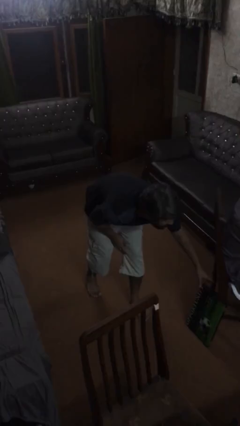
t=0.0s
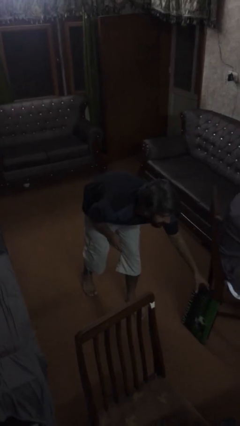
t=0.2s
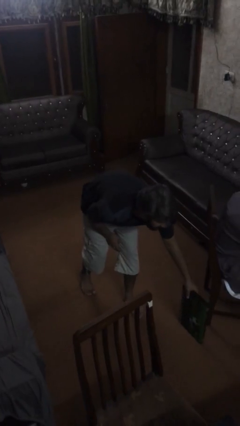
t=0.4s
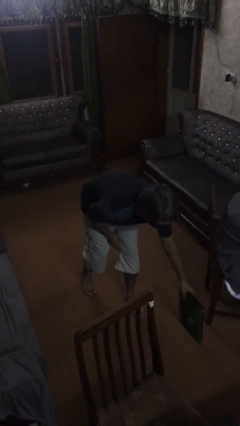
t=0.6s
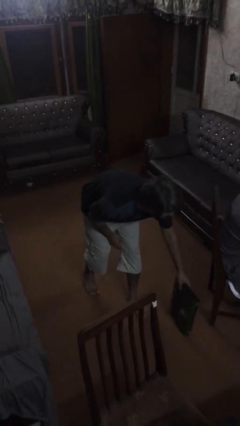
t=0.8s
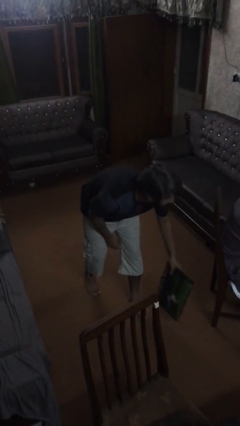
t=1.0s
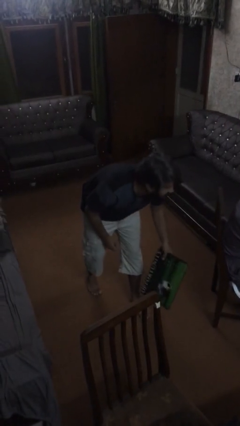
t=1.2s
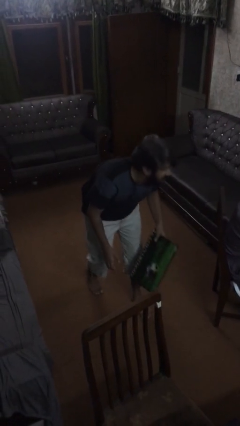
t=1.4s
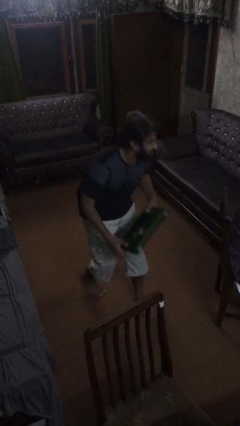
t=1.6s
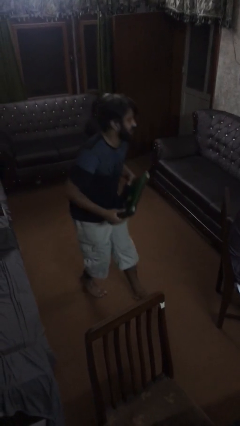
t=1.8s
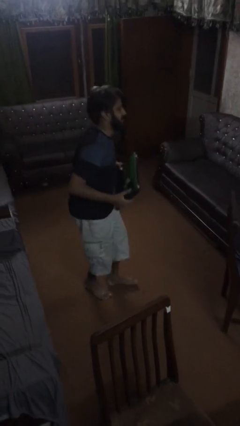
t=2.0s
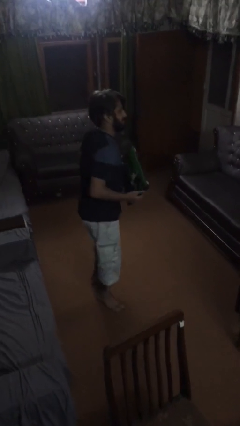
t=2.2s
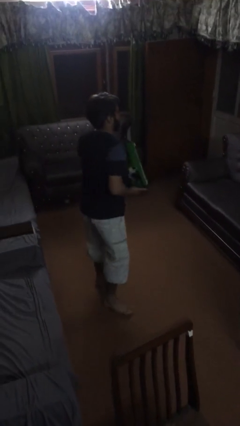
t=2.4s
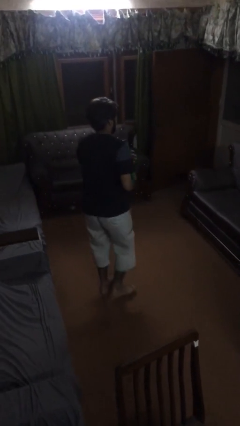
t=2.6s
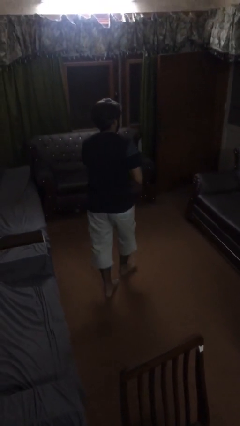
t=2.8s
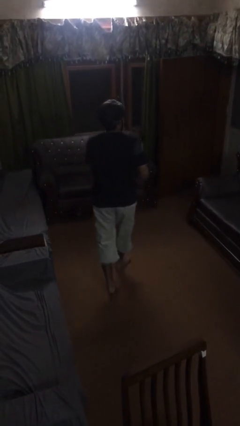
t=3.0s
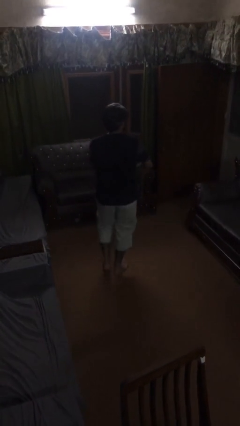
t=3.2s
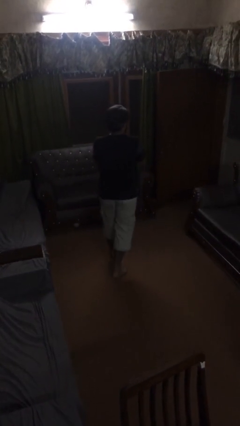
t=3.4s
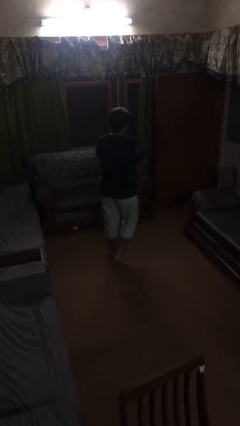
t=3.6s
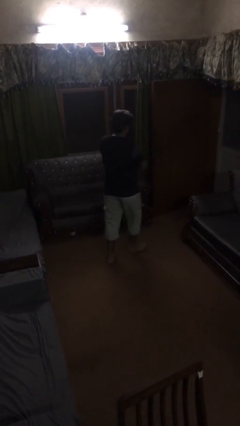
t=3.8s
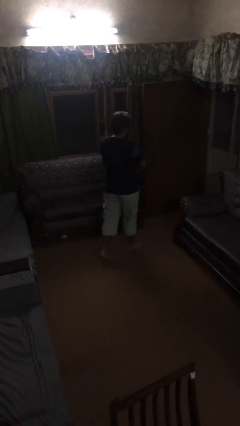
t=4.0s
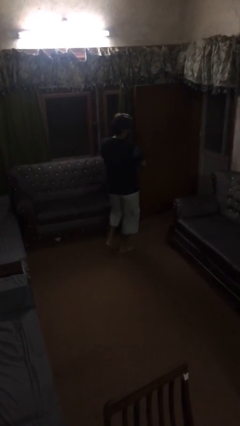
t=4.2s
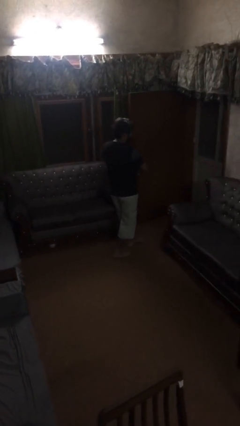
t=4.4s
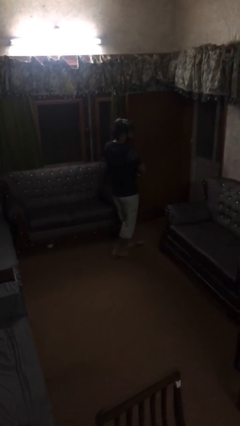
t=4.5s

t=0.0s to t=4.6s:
person steals object from person

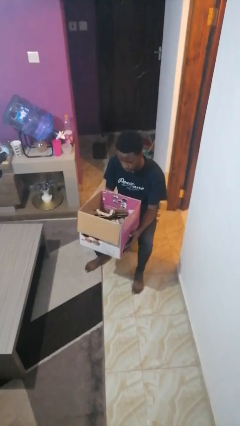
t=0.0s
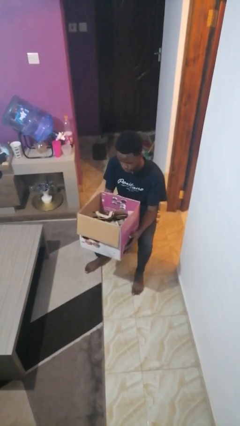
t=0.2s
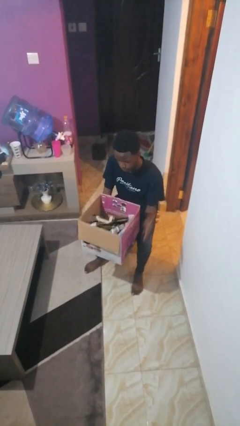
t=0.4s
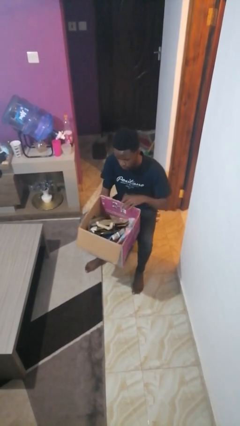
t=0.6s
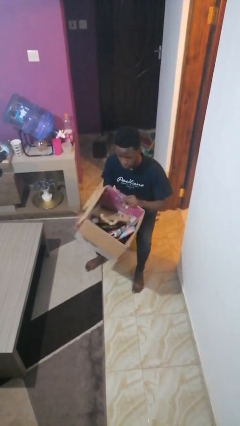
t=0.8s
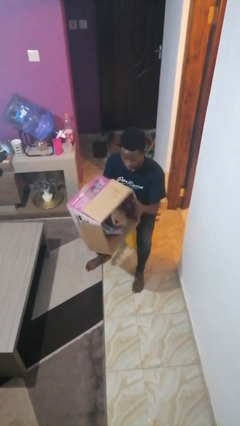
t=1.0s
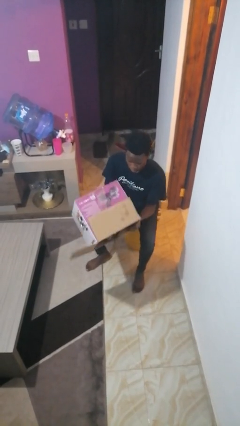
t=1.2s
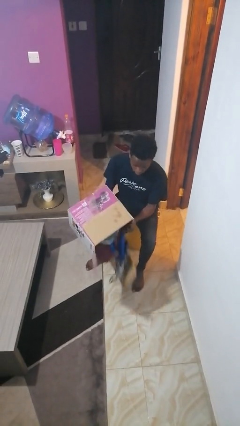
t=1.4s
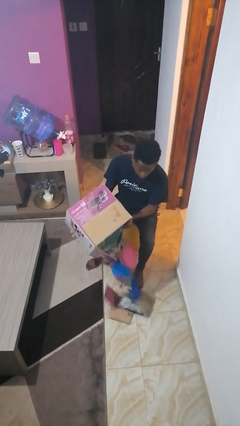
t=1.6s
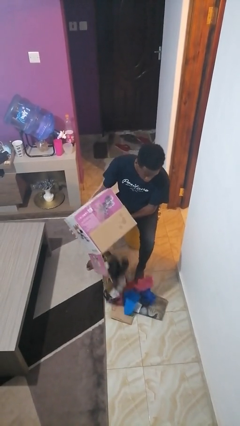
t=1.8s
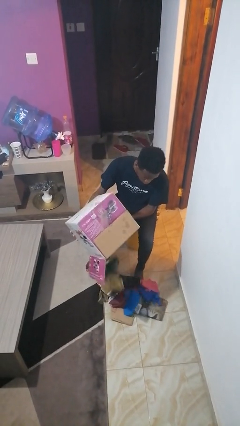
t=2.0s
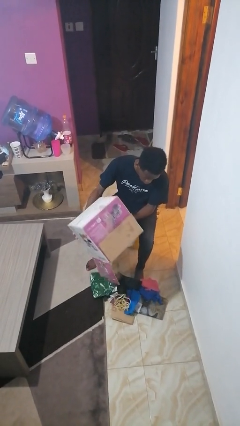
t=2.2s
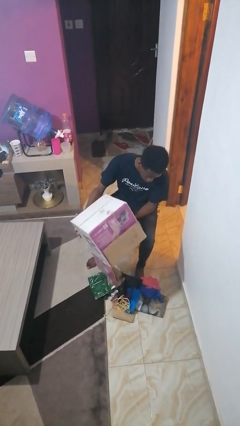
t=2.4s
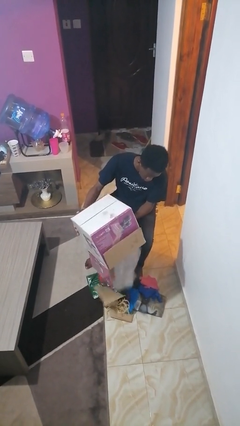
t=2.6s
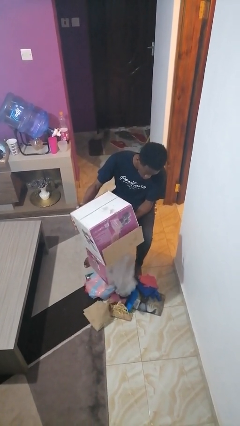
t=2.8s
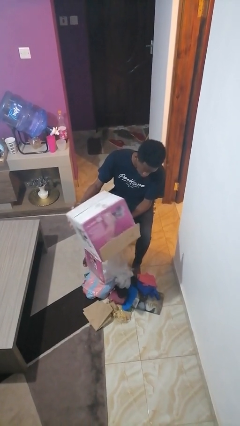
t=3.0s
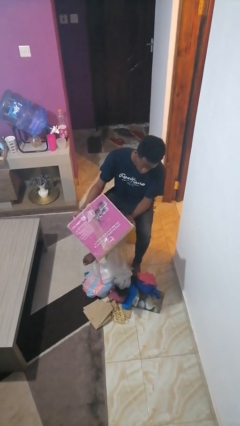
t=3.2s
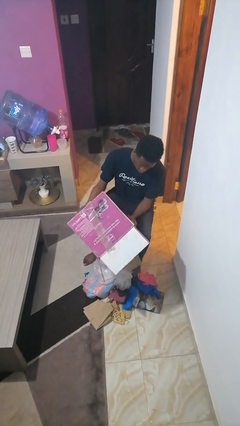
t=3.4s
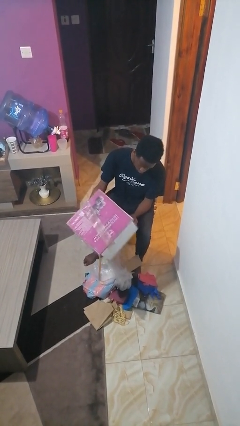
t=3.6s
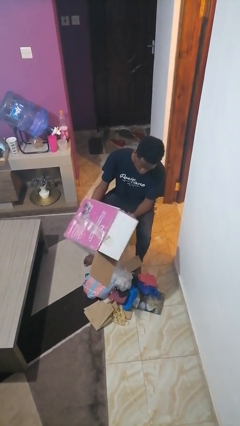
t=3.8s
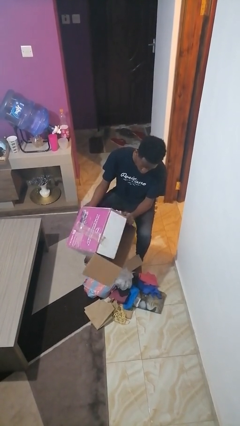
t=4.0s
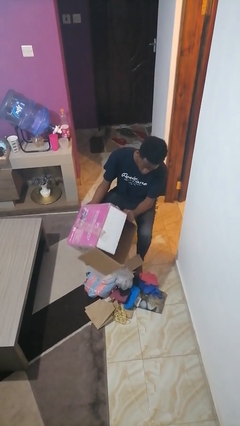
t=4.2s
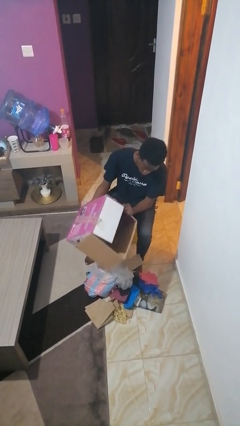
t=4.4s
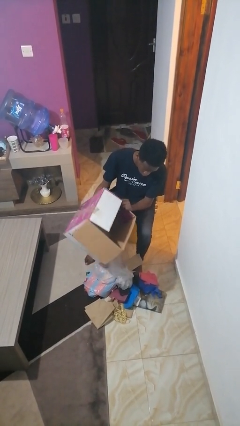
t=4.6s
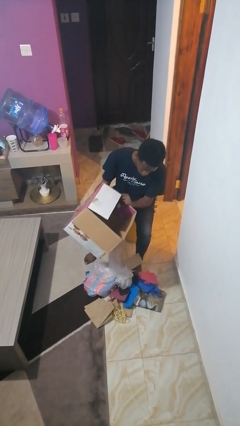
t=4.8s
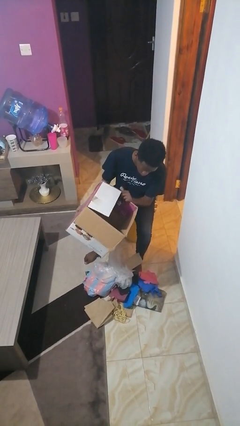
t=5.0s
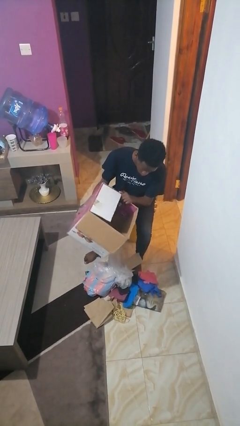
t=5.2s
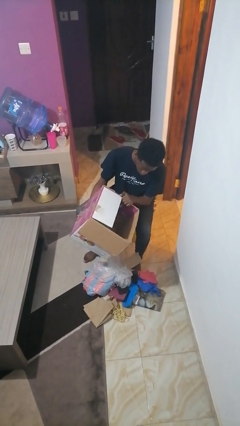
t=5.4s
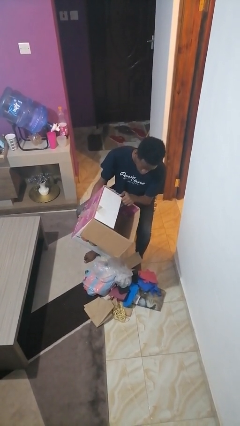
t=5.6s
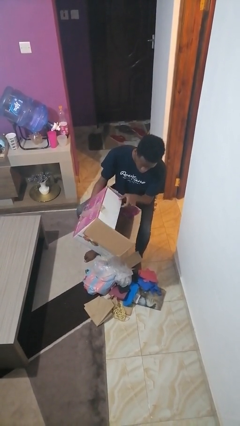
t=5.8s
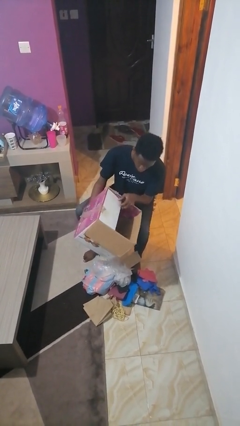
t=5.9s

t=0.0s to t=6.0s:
person unloads box onto floor

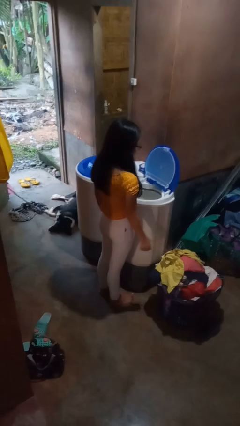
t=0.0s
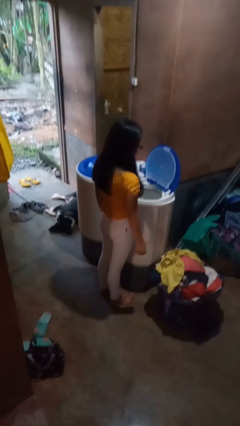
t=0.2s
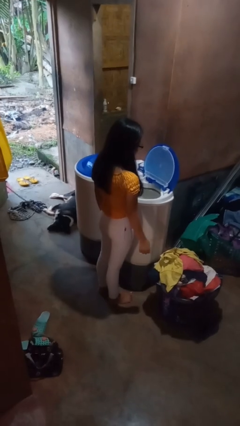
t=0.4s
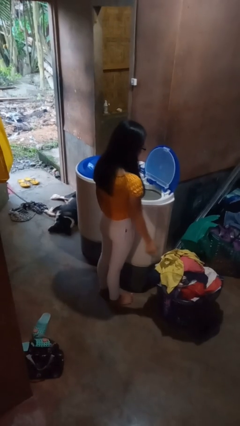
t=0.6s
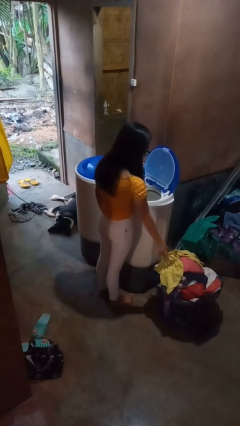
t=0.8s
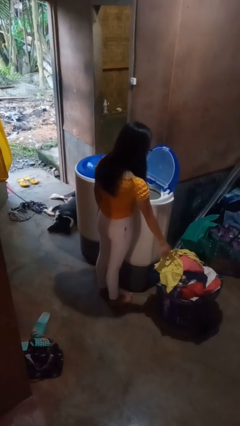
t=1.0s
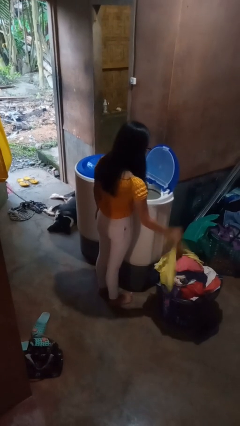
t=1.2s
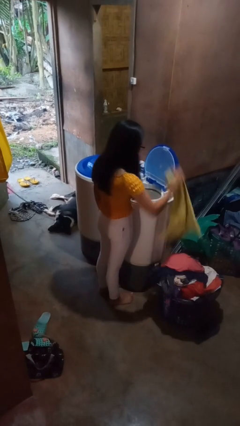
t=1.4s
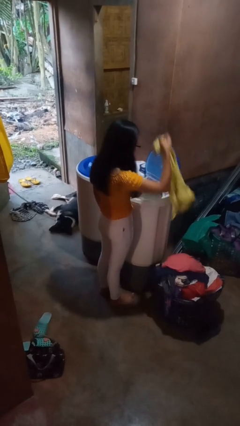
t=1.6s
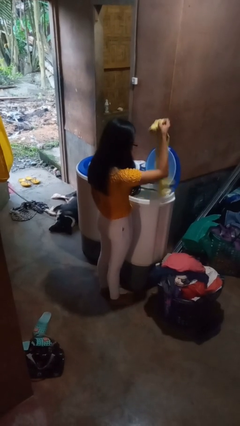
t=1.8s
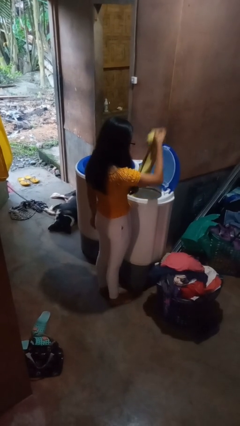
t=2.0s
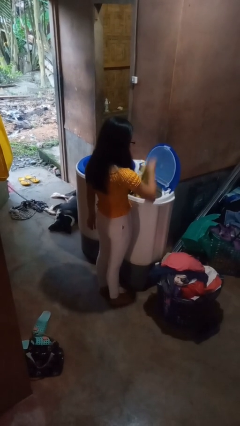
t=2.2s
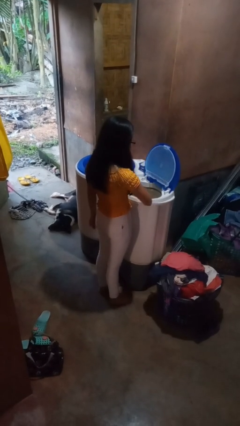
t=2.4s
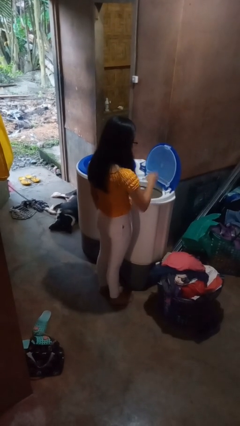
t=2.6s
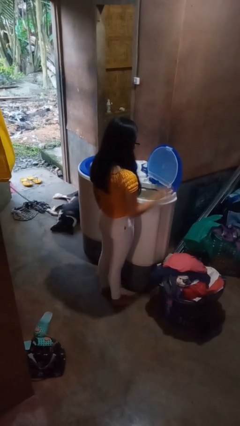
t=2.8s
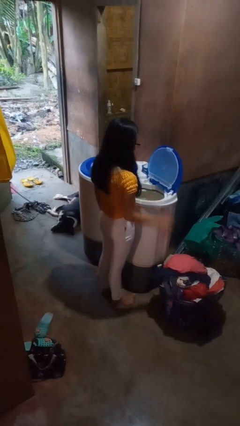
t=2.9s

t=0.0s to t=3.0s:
person loads dryer

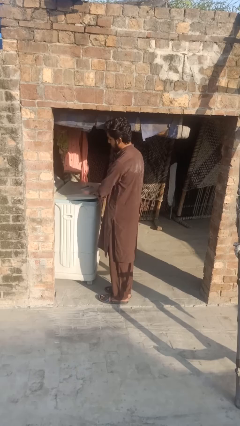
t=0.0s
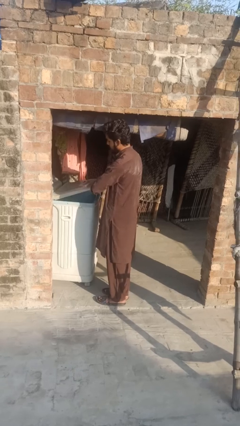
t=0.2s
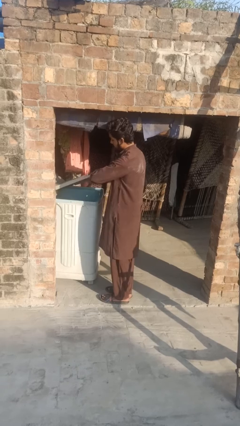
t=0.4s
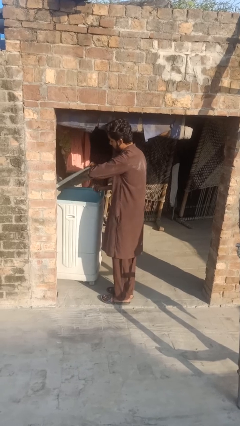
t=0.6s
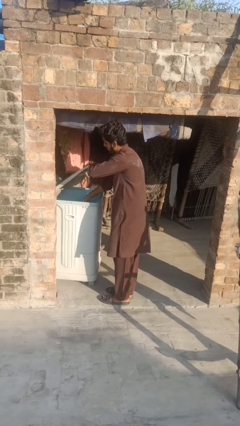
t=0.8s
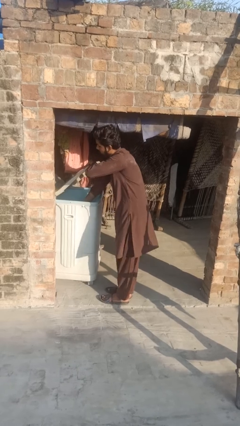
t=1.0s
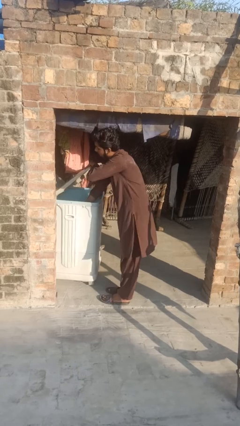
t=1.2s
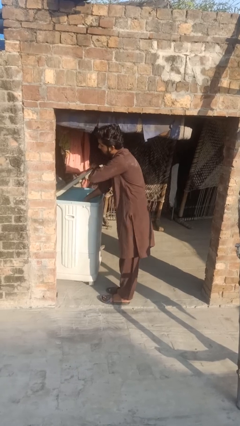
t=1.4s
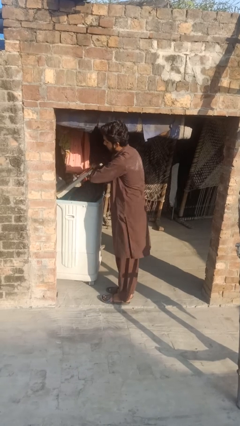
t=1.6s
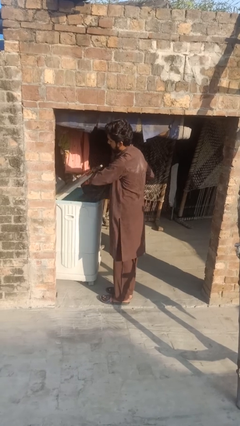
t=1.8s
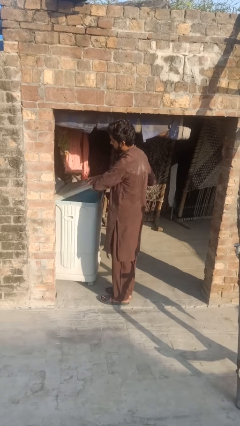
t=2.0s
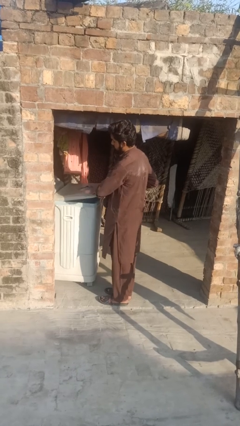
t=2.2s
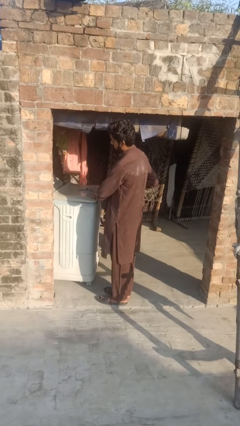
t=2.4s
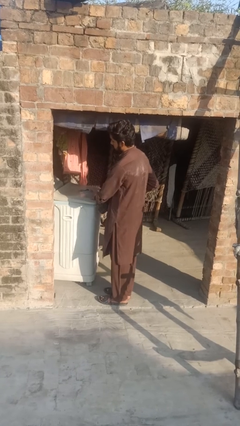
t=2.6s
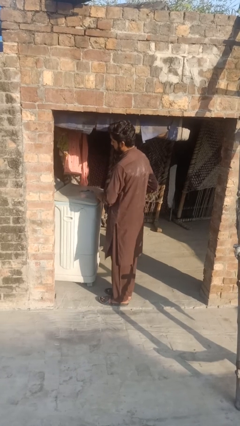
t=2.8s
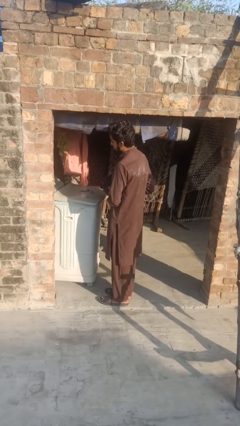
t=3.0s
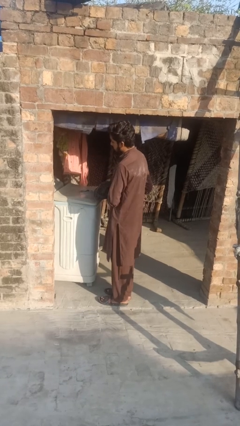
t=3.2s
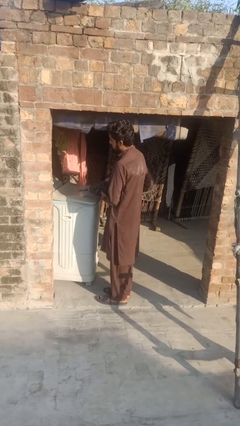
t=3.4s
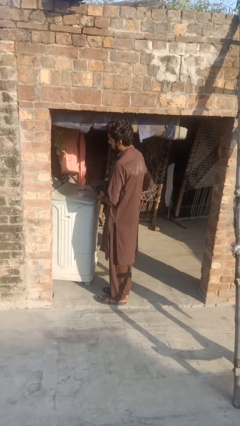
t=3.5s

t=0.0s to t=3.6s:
person unloads dryer

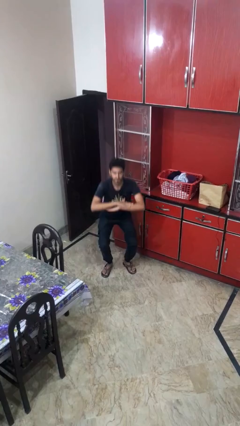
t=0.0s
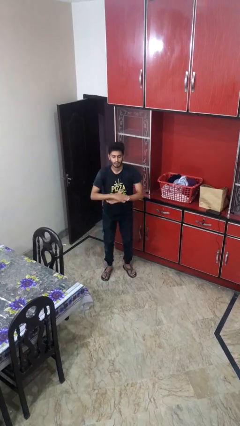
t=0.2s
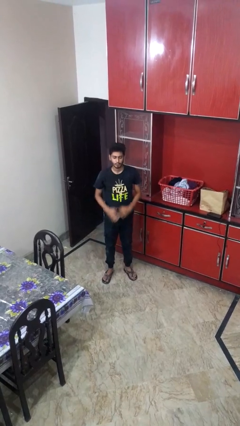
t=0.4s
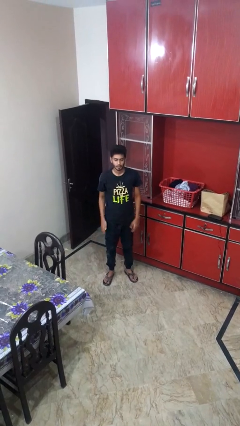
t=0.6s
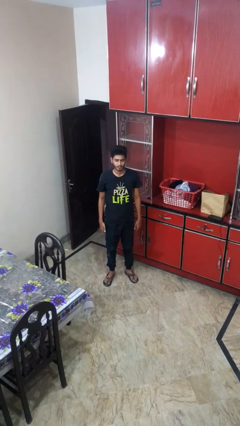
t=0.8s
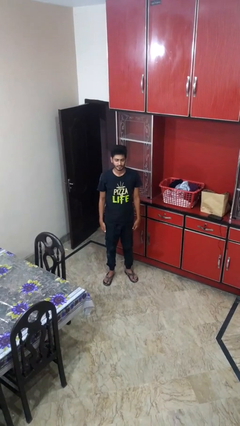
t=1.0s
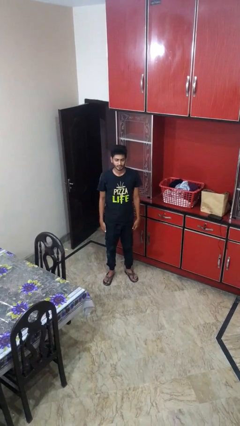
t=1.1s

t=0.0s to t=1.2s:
person stands up
